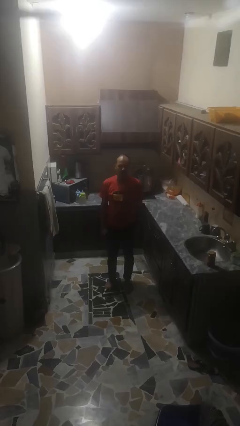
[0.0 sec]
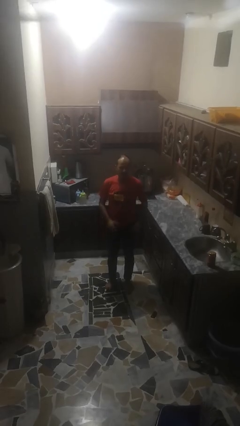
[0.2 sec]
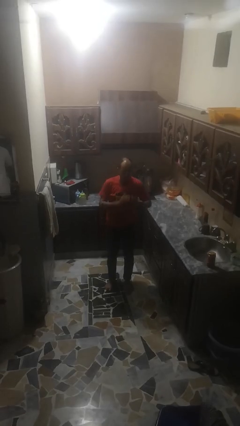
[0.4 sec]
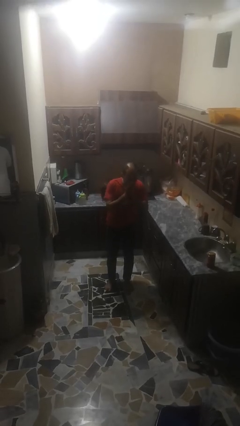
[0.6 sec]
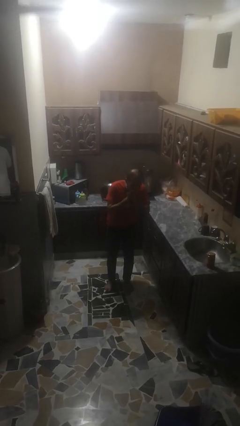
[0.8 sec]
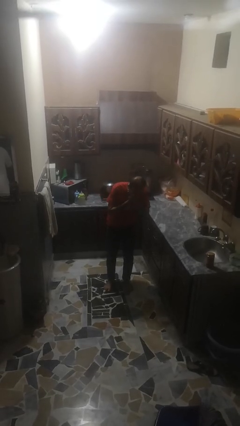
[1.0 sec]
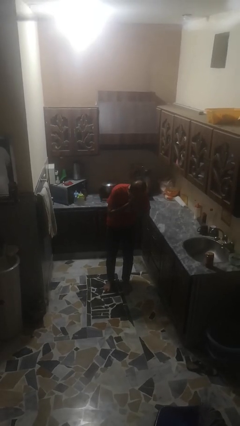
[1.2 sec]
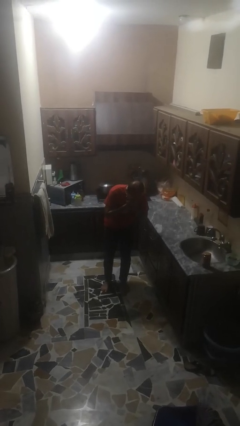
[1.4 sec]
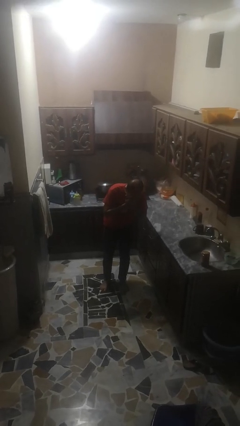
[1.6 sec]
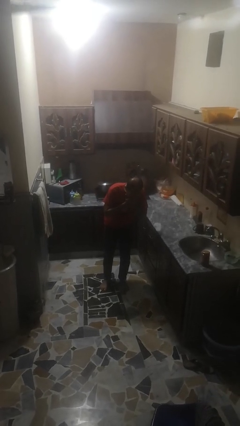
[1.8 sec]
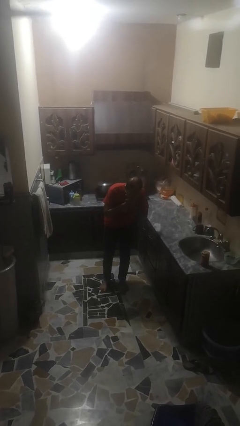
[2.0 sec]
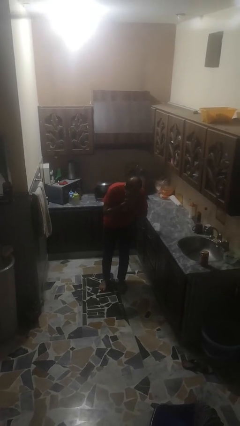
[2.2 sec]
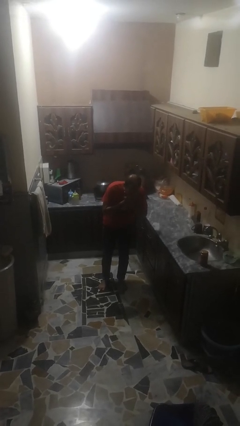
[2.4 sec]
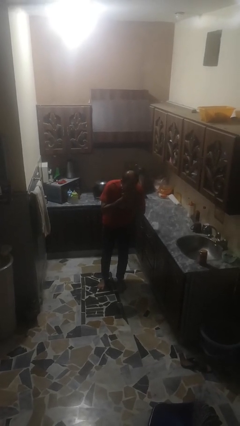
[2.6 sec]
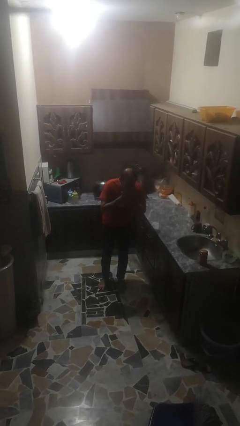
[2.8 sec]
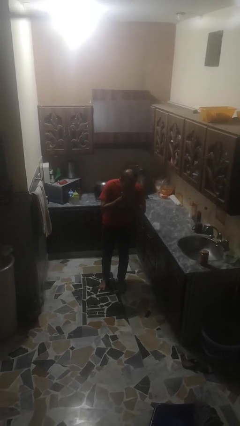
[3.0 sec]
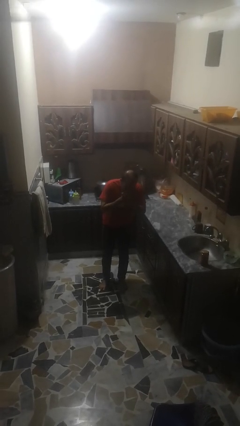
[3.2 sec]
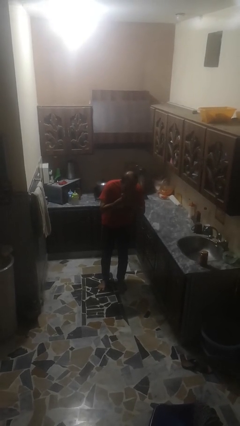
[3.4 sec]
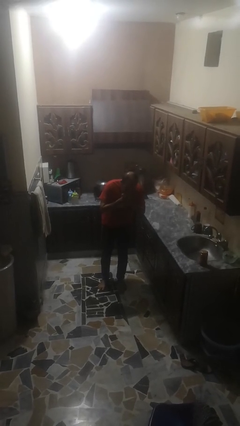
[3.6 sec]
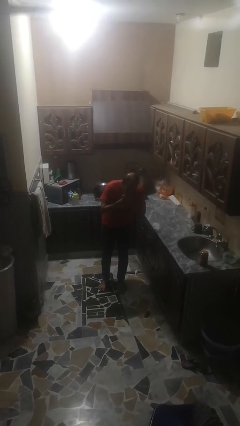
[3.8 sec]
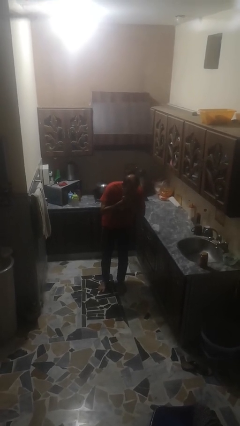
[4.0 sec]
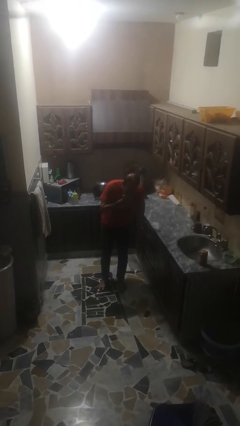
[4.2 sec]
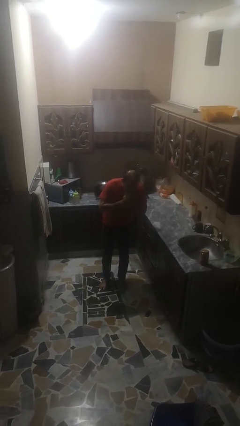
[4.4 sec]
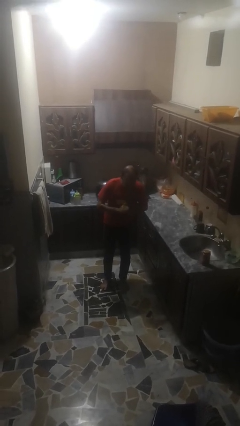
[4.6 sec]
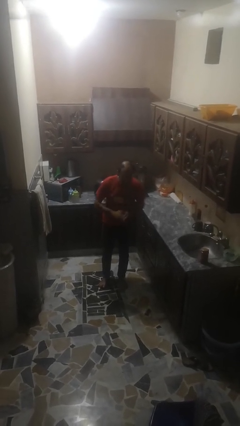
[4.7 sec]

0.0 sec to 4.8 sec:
person sneezes into hand

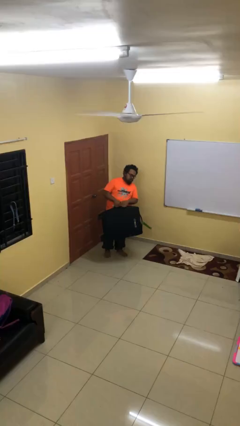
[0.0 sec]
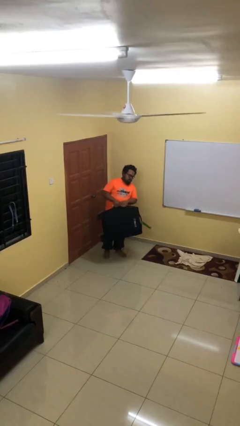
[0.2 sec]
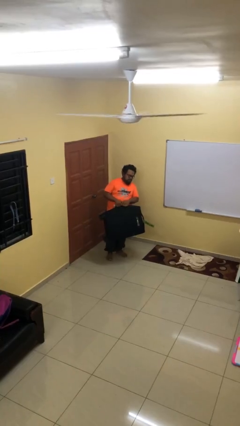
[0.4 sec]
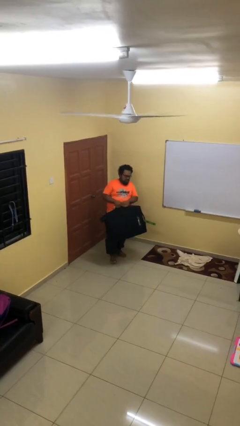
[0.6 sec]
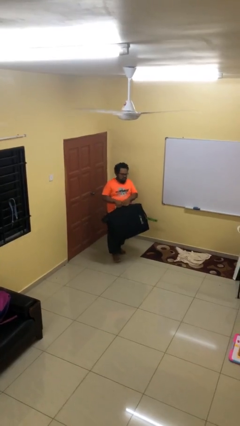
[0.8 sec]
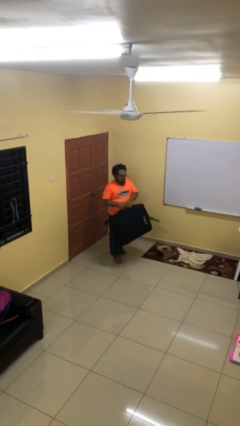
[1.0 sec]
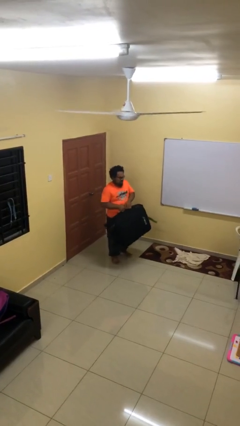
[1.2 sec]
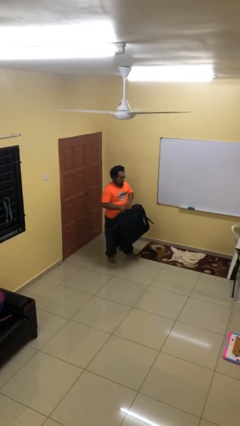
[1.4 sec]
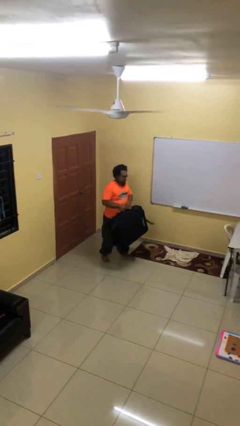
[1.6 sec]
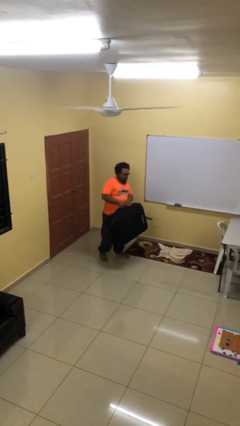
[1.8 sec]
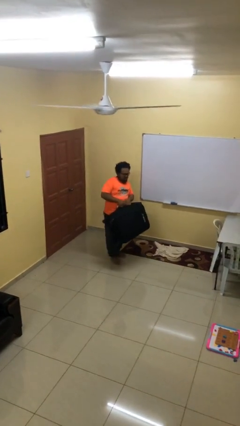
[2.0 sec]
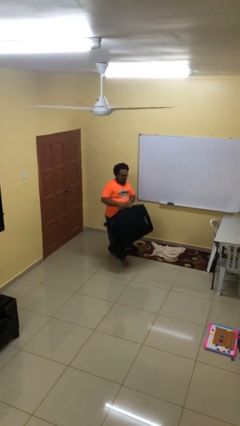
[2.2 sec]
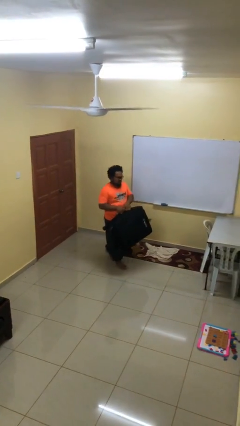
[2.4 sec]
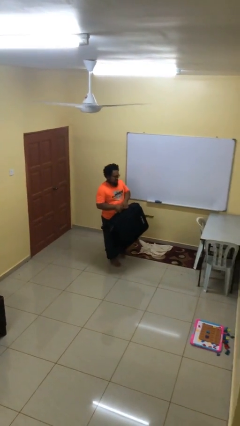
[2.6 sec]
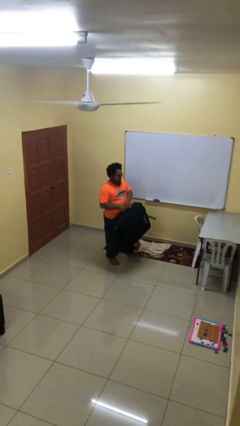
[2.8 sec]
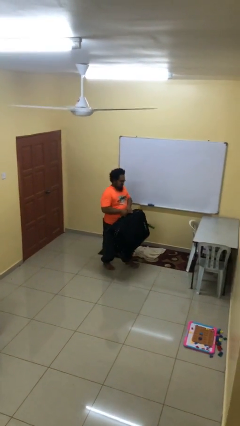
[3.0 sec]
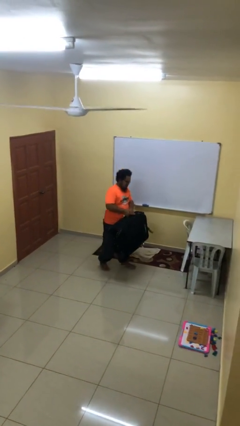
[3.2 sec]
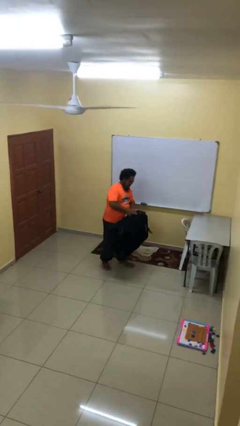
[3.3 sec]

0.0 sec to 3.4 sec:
person carries heavy object

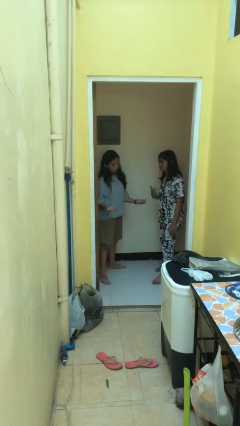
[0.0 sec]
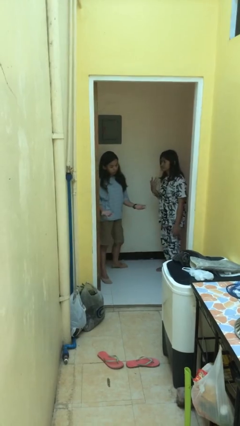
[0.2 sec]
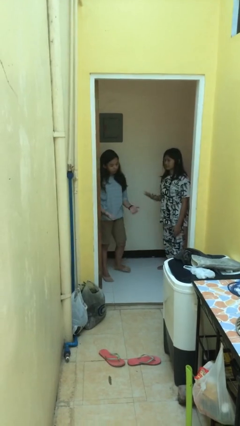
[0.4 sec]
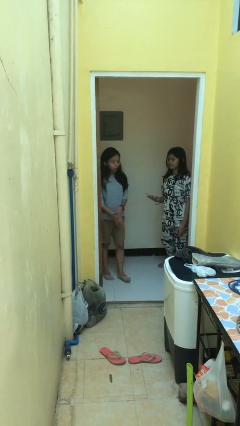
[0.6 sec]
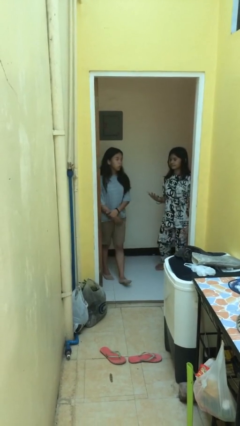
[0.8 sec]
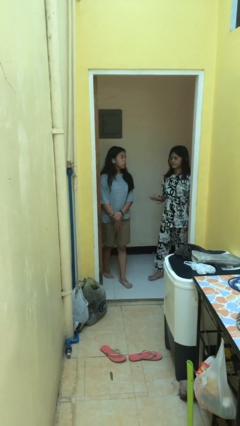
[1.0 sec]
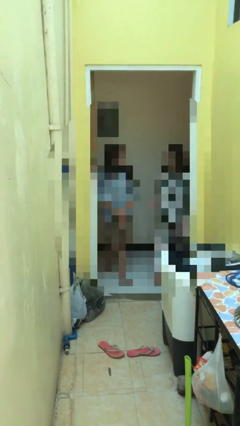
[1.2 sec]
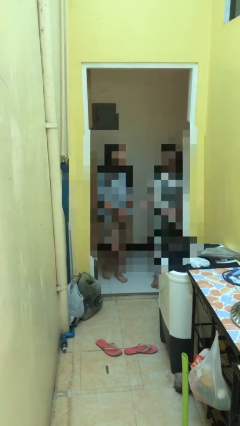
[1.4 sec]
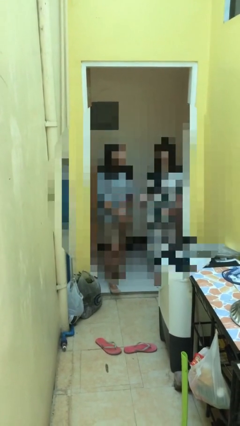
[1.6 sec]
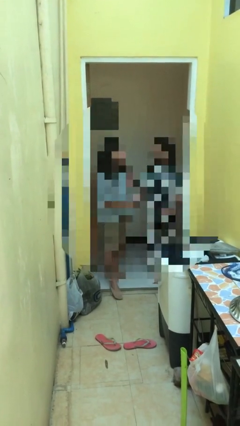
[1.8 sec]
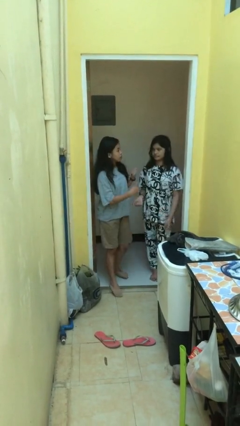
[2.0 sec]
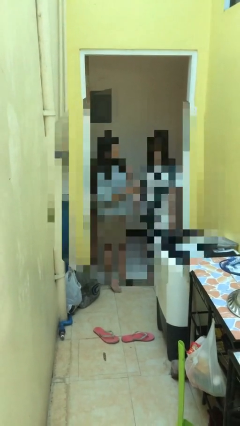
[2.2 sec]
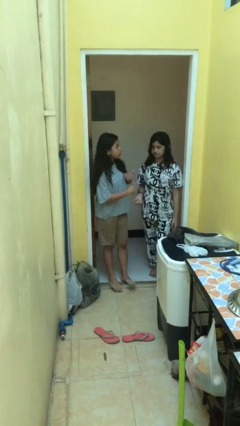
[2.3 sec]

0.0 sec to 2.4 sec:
person talks to person

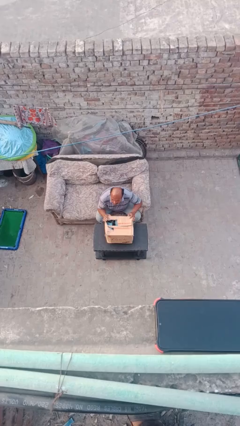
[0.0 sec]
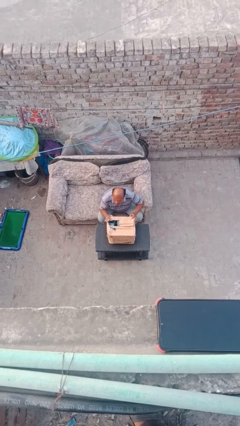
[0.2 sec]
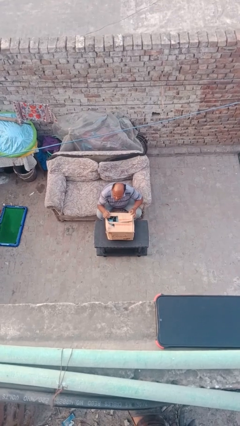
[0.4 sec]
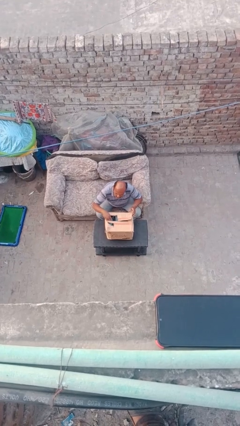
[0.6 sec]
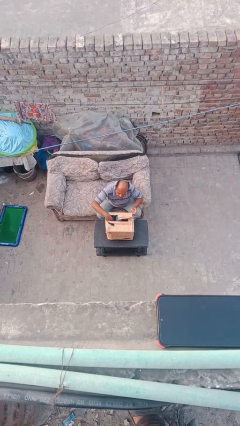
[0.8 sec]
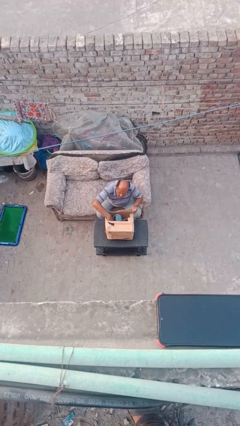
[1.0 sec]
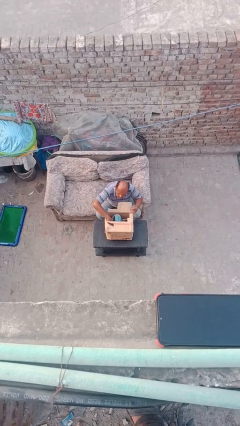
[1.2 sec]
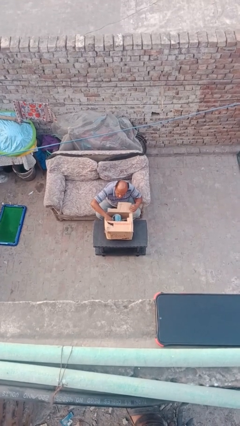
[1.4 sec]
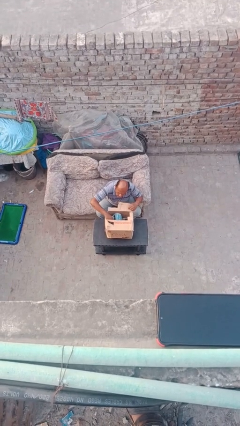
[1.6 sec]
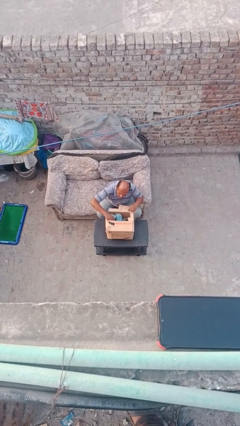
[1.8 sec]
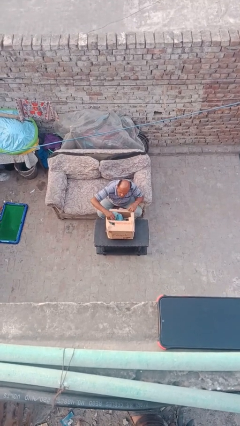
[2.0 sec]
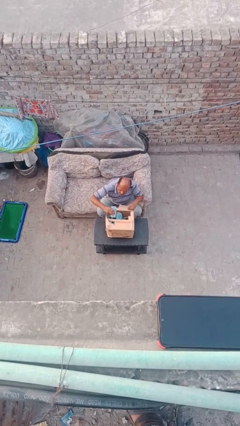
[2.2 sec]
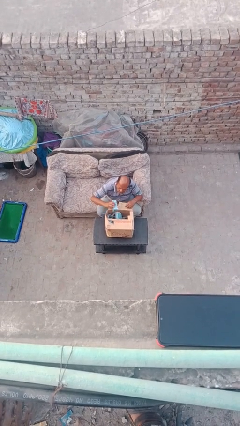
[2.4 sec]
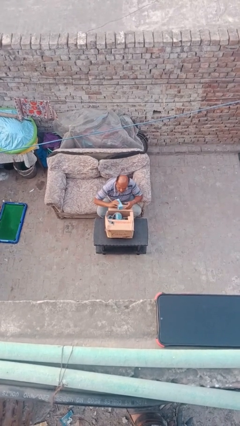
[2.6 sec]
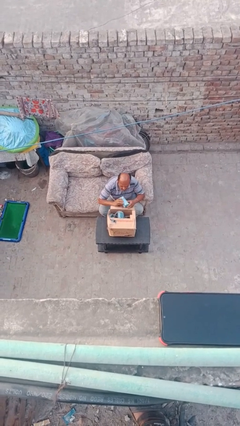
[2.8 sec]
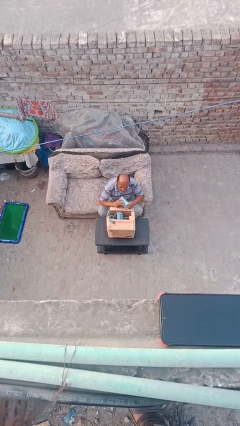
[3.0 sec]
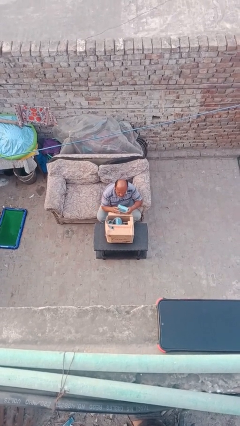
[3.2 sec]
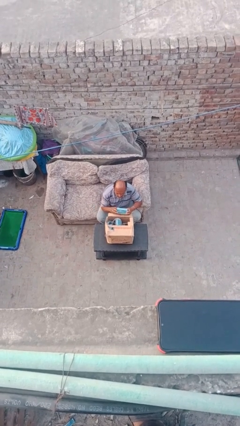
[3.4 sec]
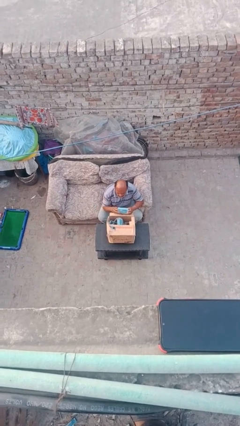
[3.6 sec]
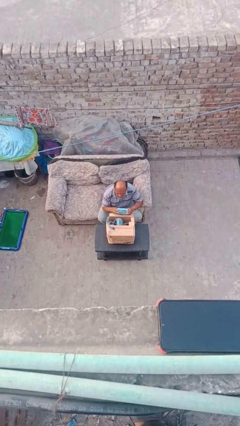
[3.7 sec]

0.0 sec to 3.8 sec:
person takes object from box

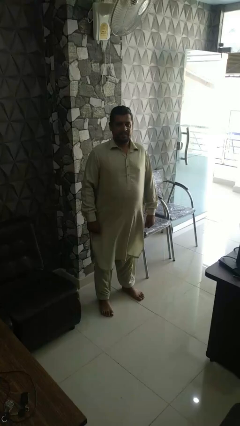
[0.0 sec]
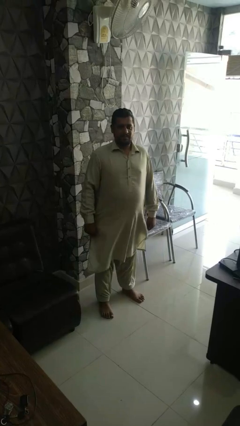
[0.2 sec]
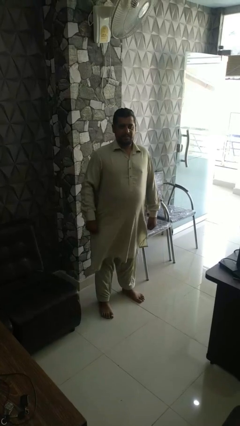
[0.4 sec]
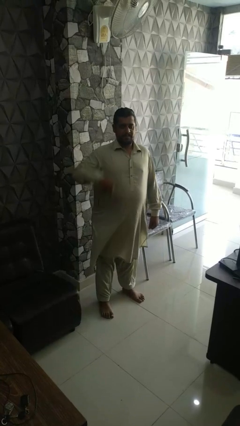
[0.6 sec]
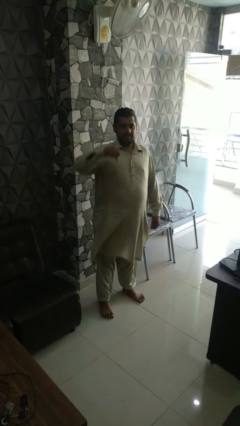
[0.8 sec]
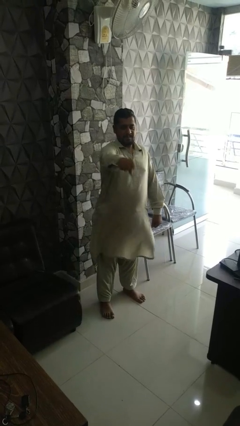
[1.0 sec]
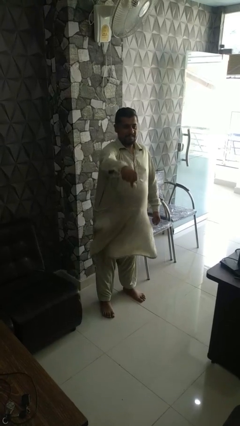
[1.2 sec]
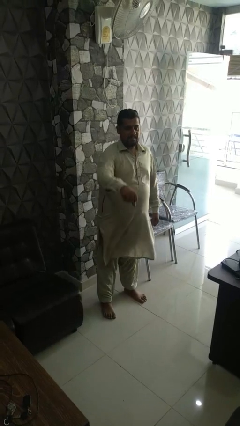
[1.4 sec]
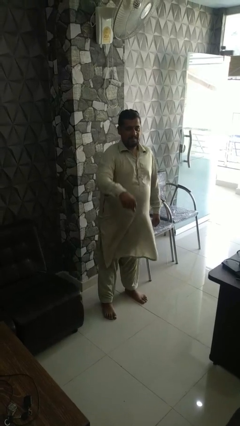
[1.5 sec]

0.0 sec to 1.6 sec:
person karate chop

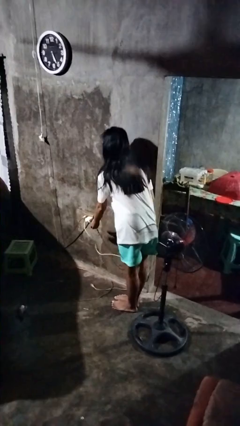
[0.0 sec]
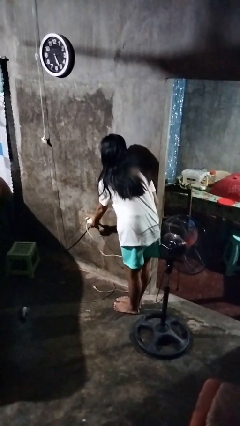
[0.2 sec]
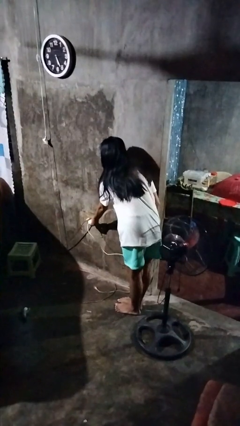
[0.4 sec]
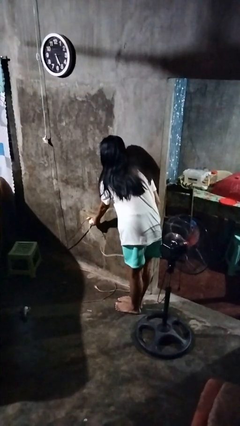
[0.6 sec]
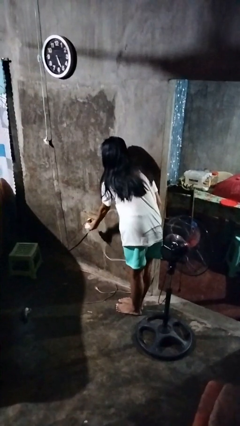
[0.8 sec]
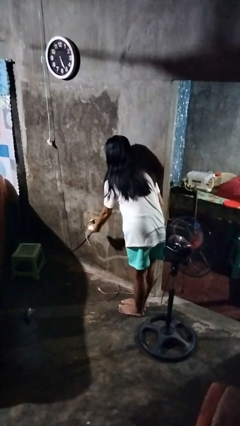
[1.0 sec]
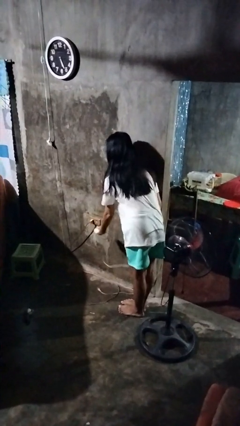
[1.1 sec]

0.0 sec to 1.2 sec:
person unplugs from electrical socket
